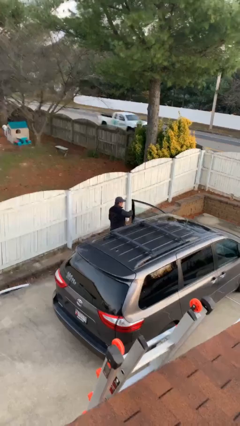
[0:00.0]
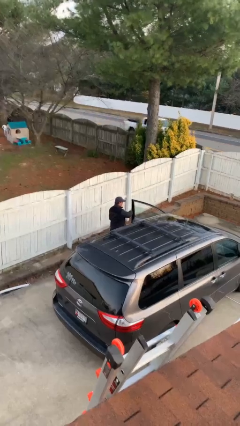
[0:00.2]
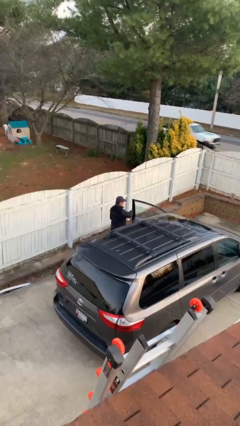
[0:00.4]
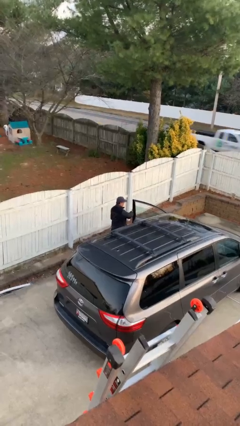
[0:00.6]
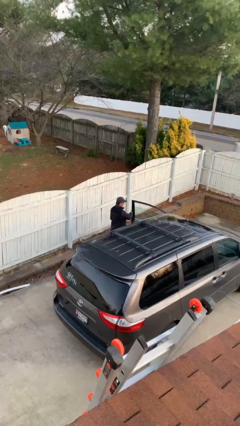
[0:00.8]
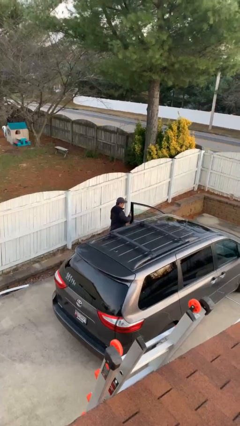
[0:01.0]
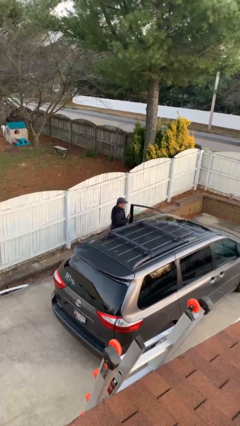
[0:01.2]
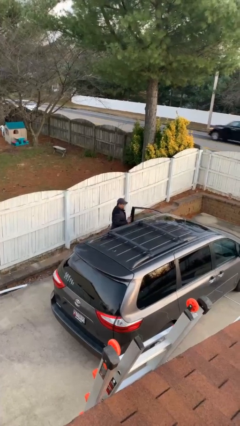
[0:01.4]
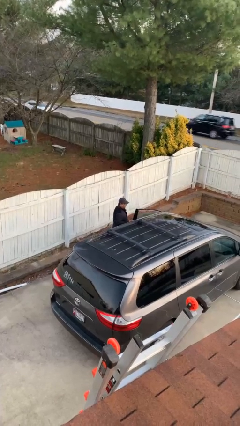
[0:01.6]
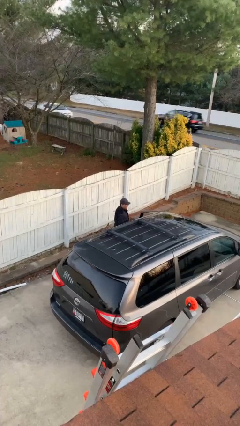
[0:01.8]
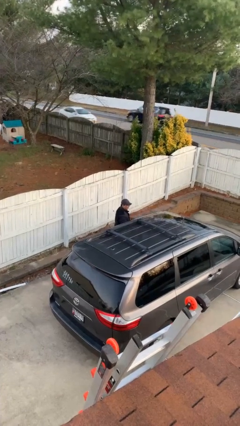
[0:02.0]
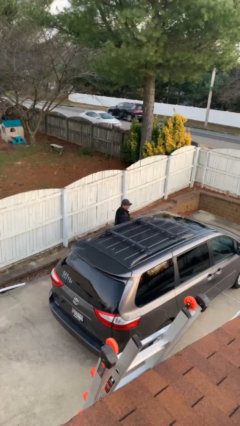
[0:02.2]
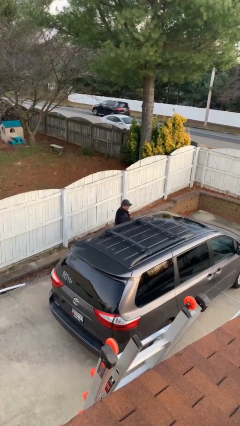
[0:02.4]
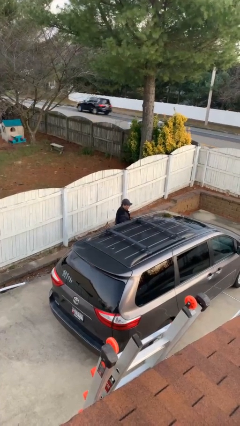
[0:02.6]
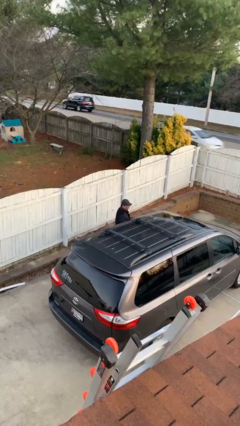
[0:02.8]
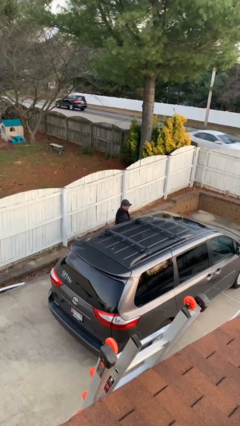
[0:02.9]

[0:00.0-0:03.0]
person closes car door

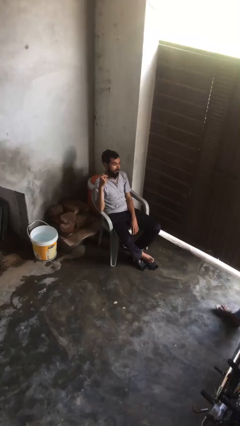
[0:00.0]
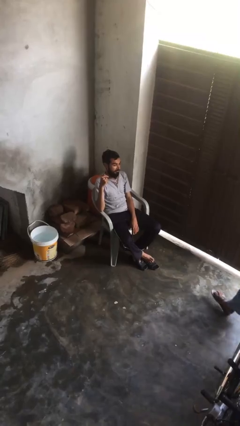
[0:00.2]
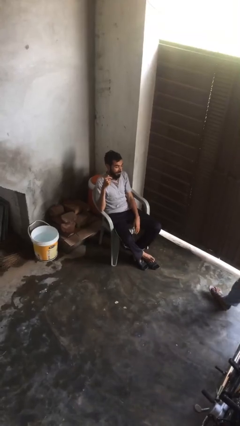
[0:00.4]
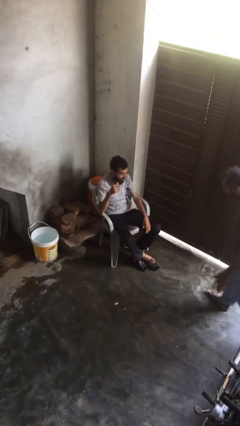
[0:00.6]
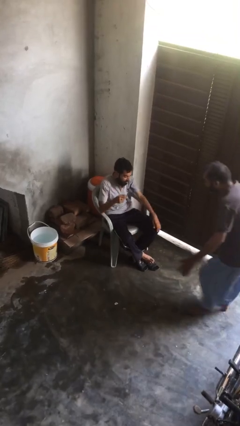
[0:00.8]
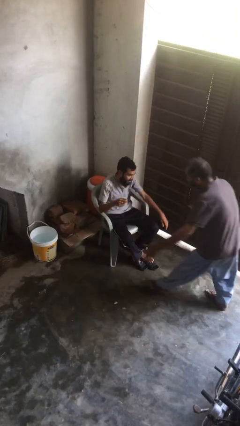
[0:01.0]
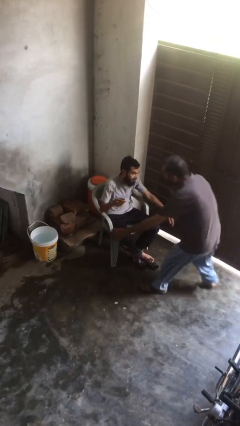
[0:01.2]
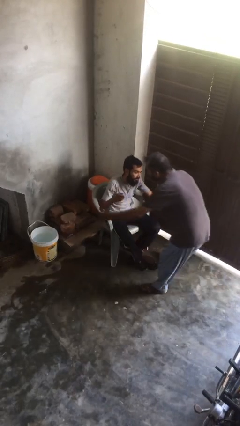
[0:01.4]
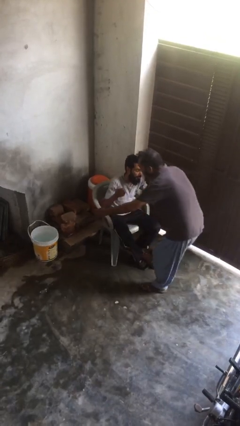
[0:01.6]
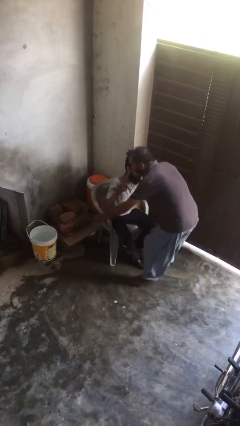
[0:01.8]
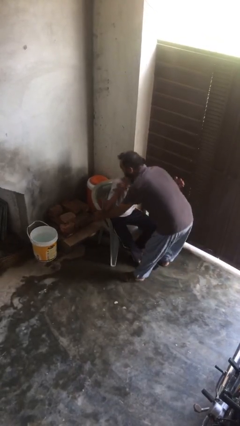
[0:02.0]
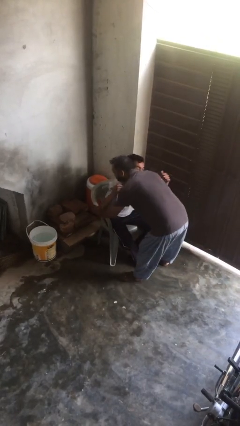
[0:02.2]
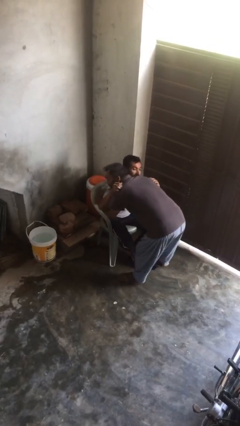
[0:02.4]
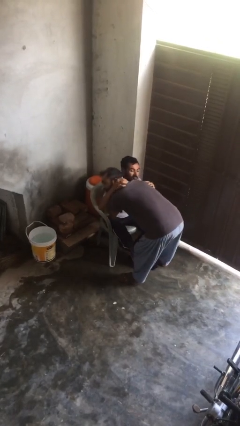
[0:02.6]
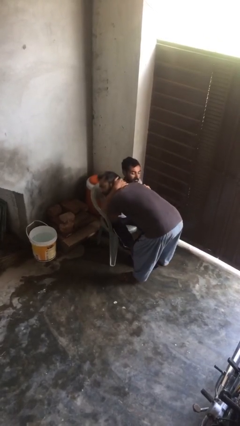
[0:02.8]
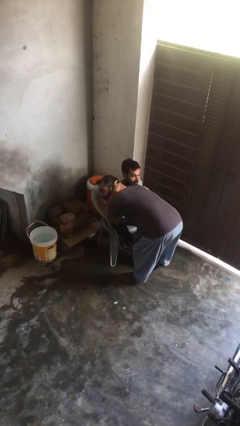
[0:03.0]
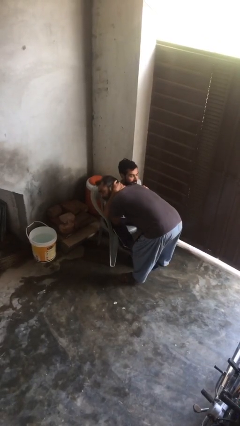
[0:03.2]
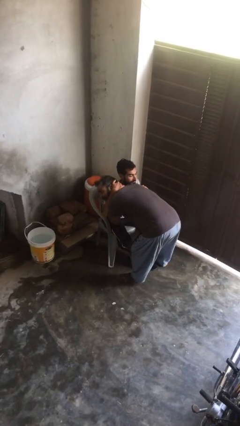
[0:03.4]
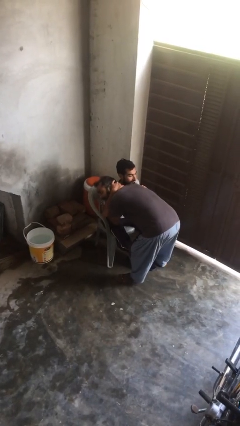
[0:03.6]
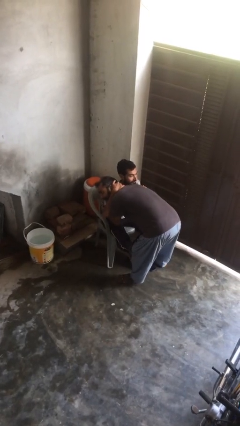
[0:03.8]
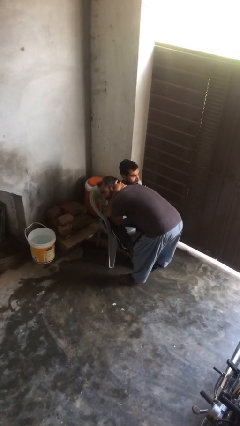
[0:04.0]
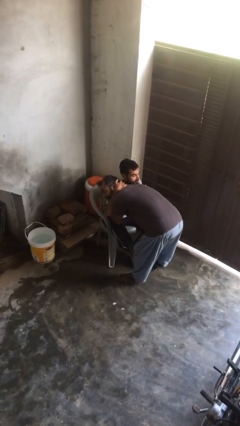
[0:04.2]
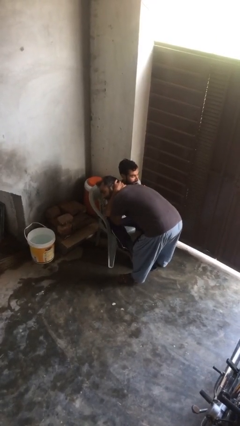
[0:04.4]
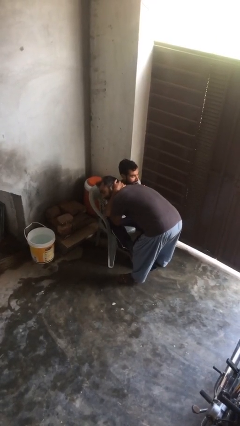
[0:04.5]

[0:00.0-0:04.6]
person embraces person

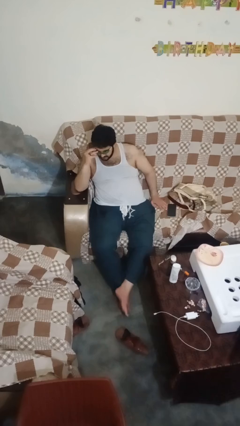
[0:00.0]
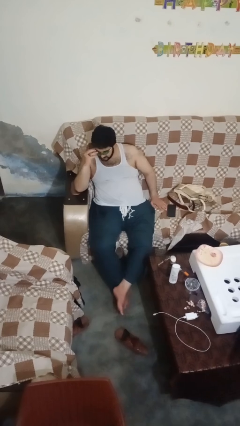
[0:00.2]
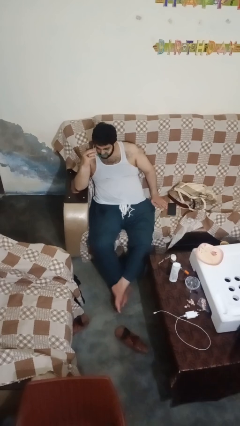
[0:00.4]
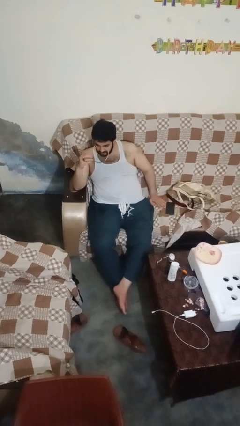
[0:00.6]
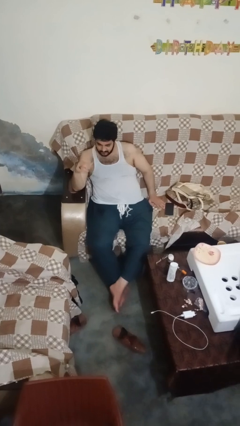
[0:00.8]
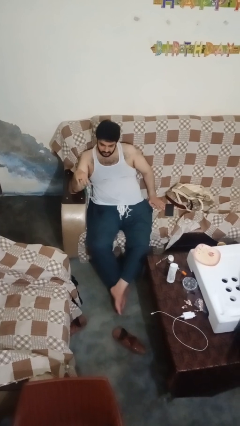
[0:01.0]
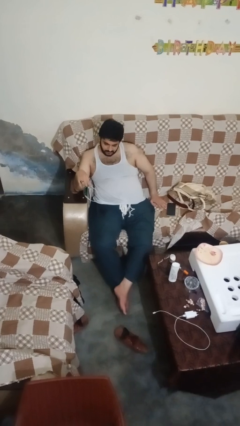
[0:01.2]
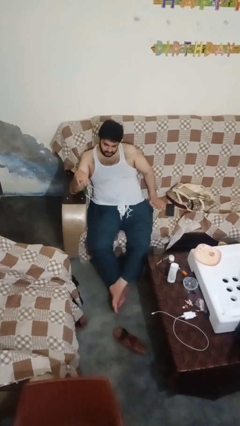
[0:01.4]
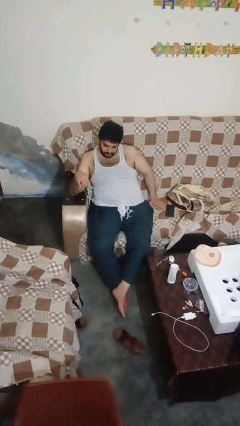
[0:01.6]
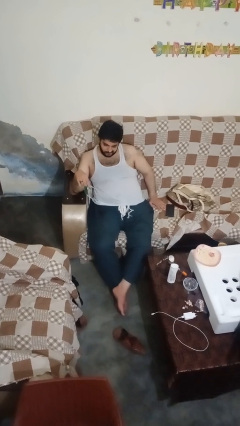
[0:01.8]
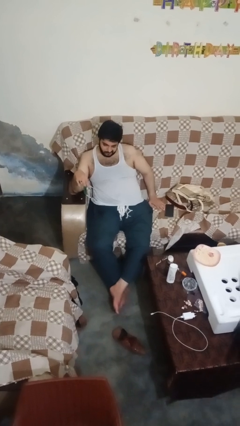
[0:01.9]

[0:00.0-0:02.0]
person takes off sunglasses

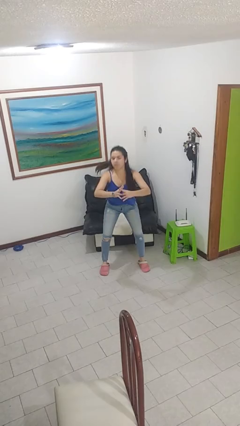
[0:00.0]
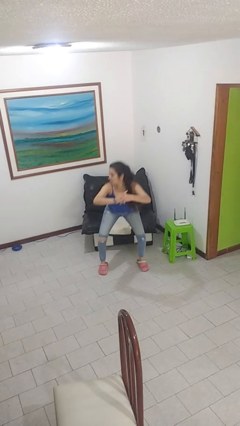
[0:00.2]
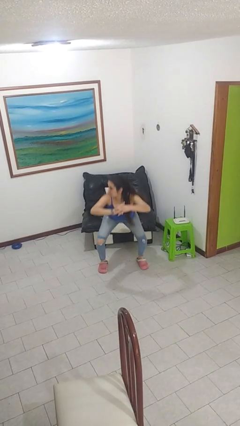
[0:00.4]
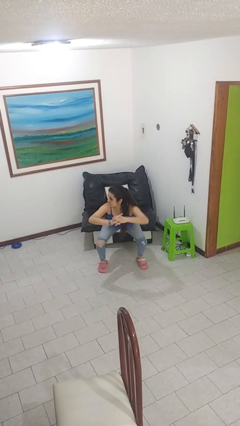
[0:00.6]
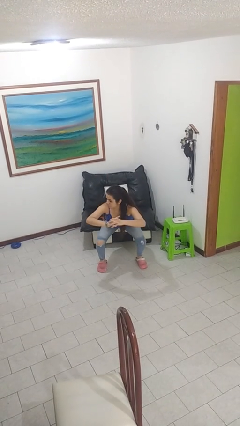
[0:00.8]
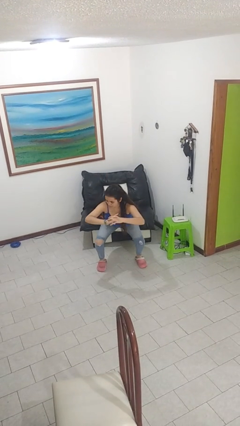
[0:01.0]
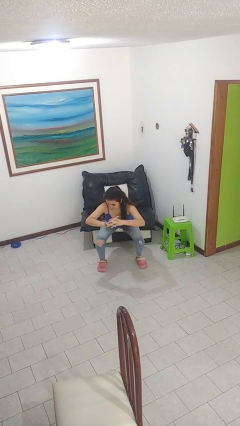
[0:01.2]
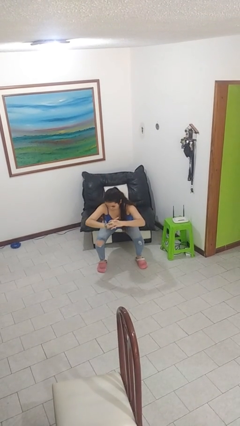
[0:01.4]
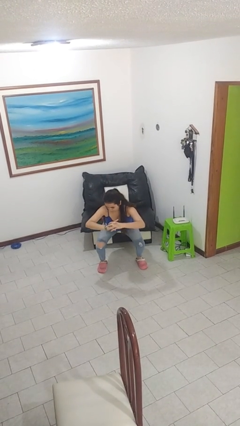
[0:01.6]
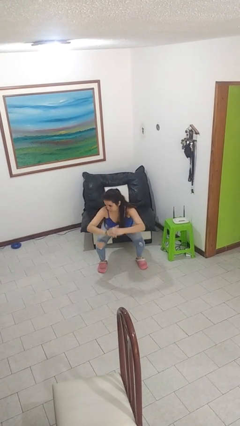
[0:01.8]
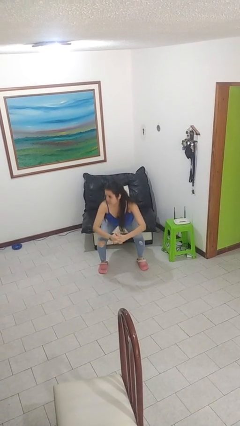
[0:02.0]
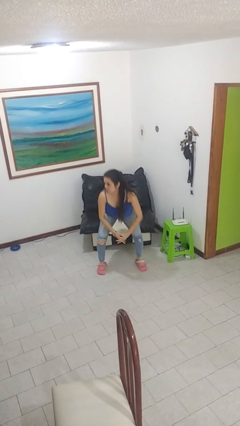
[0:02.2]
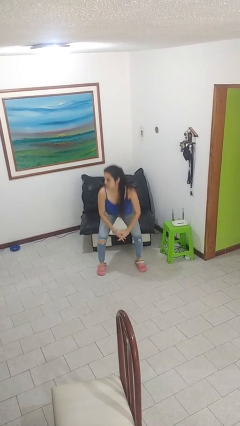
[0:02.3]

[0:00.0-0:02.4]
person squats

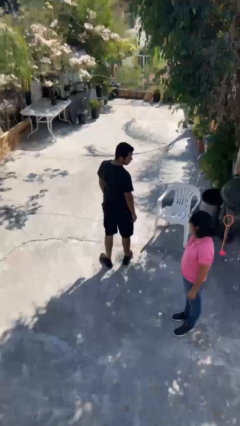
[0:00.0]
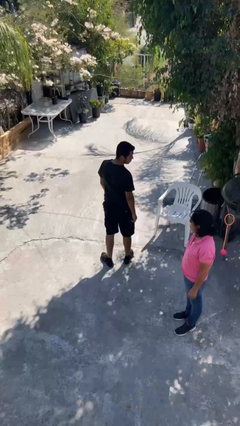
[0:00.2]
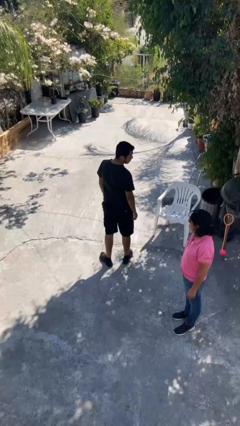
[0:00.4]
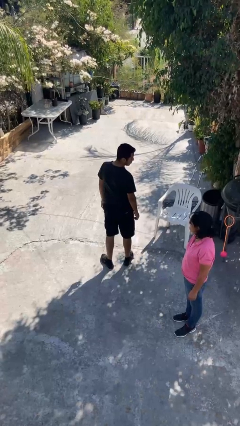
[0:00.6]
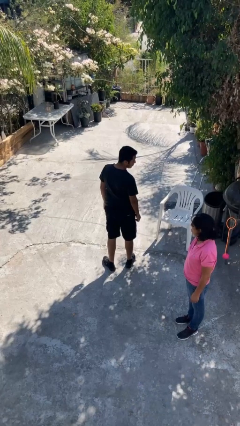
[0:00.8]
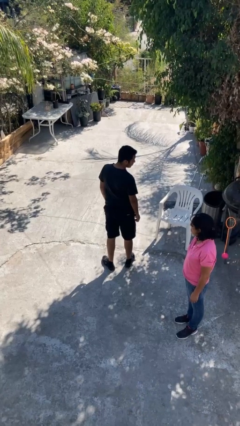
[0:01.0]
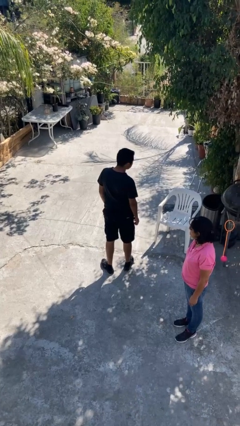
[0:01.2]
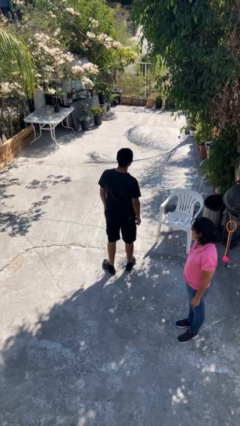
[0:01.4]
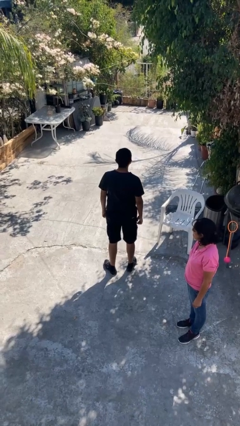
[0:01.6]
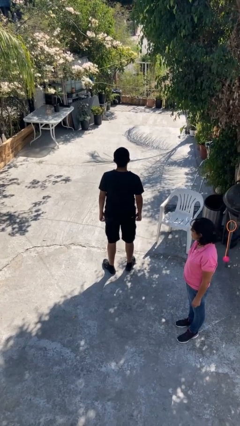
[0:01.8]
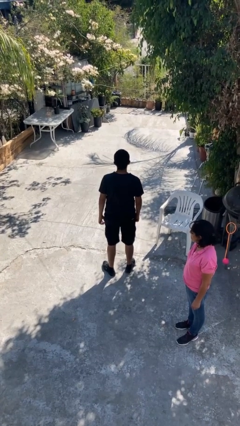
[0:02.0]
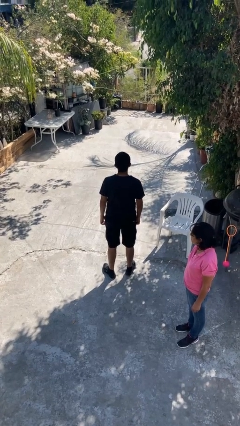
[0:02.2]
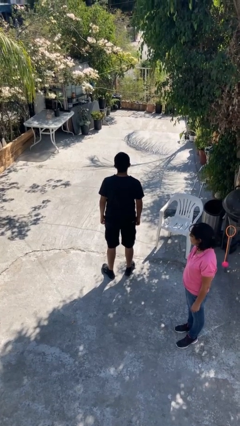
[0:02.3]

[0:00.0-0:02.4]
person looks over shoulder

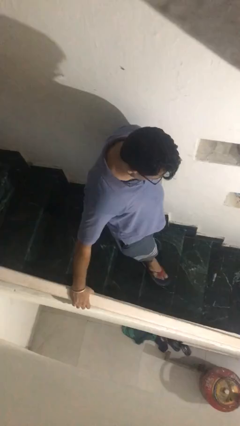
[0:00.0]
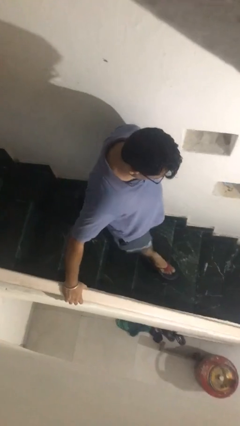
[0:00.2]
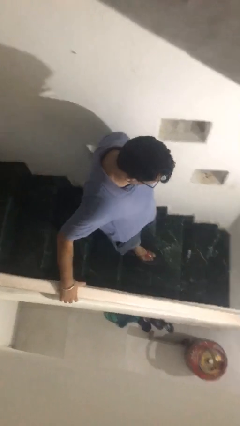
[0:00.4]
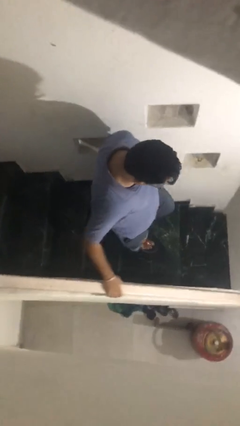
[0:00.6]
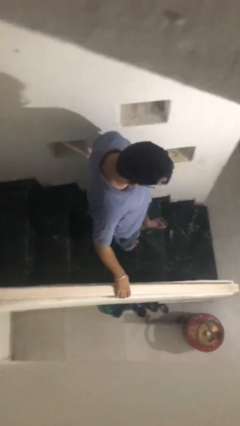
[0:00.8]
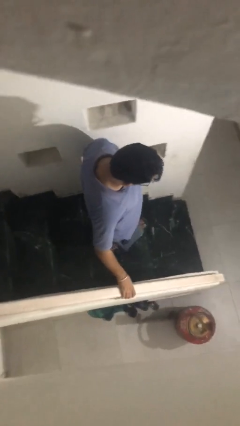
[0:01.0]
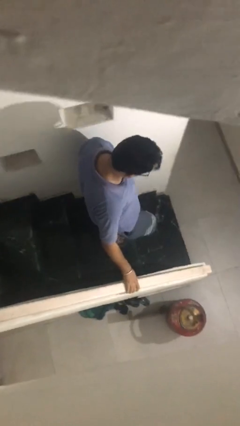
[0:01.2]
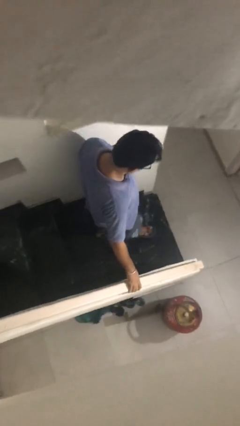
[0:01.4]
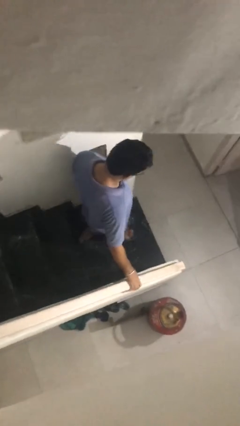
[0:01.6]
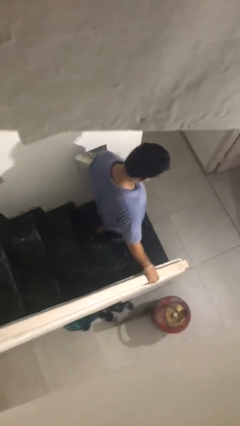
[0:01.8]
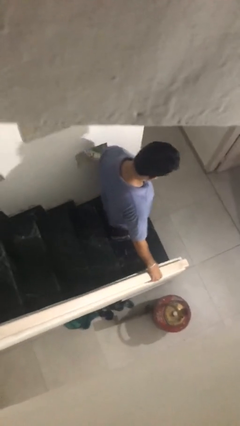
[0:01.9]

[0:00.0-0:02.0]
person climbs down stairs

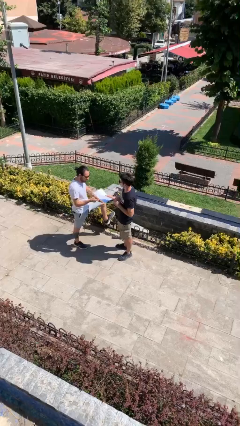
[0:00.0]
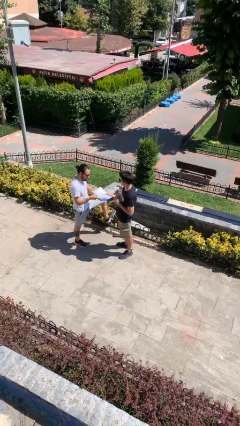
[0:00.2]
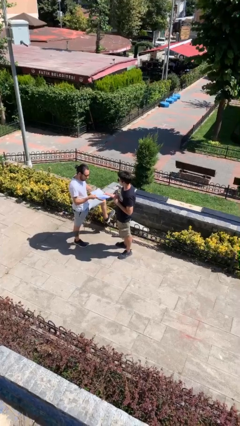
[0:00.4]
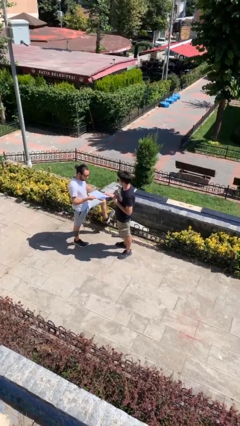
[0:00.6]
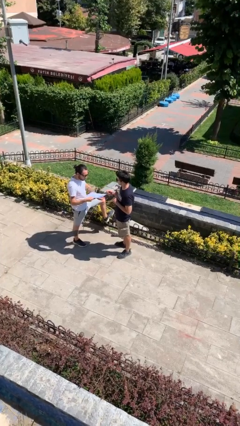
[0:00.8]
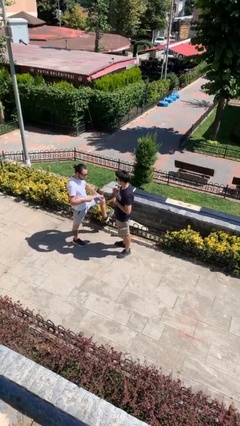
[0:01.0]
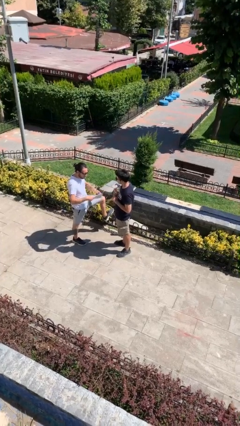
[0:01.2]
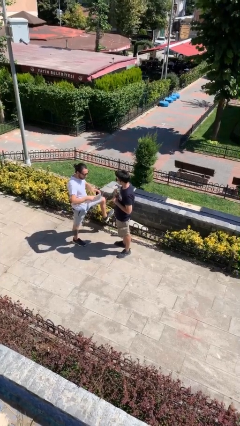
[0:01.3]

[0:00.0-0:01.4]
person transfers object to person
